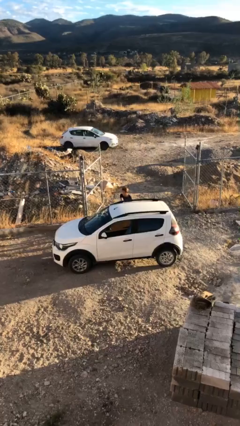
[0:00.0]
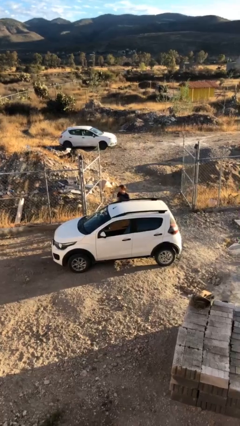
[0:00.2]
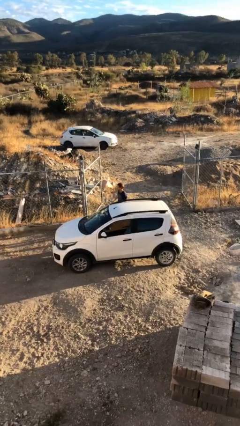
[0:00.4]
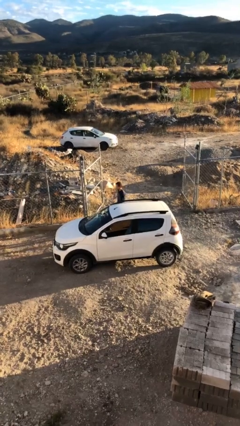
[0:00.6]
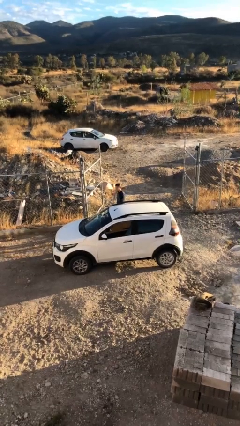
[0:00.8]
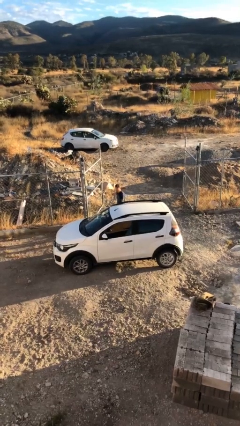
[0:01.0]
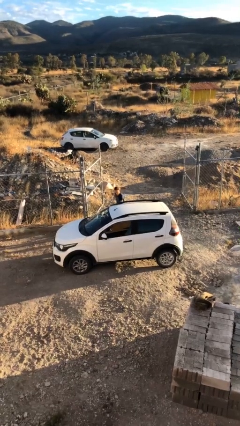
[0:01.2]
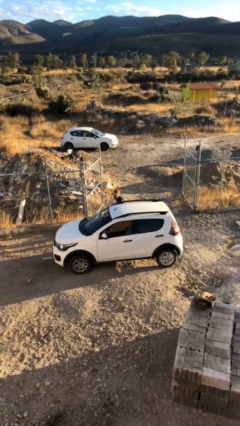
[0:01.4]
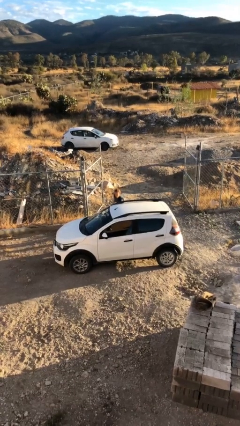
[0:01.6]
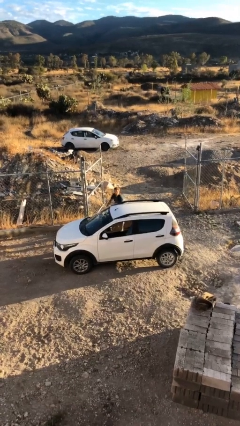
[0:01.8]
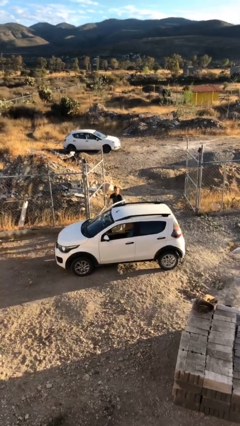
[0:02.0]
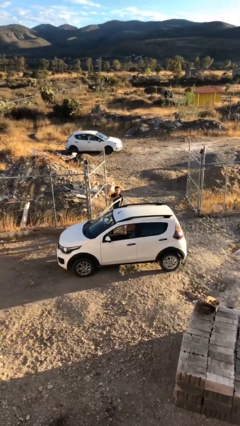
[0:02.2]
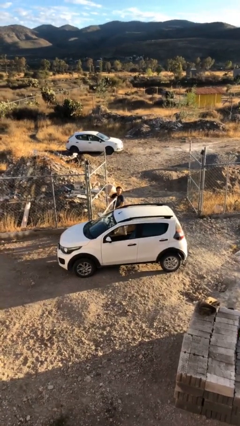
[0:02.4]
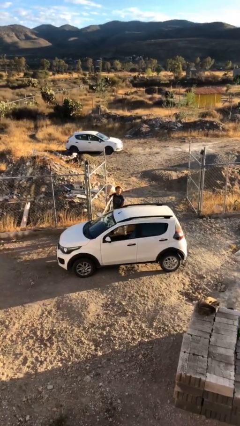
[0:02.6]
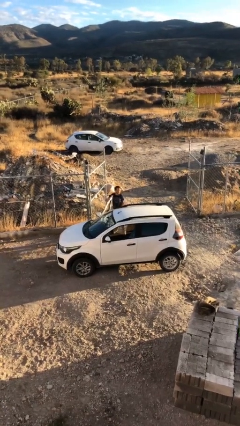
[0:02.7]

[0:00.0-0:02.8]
person opens car door

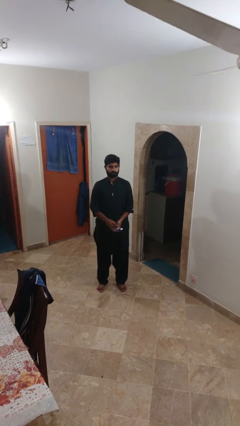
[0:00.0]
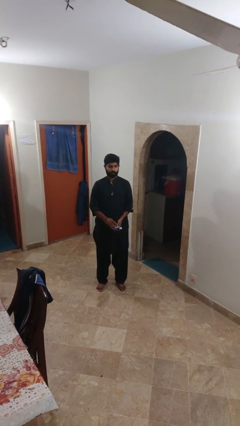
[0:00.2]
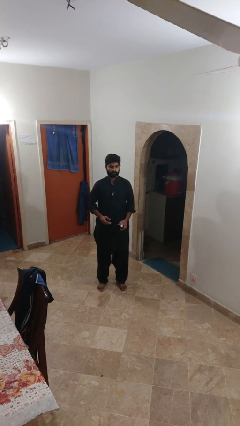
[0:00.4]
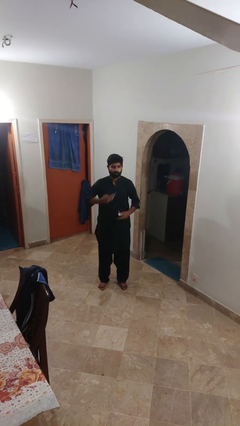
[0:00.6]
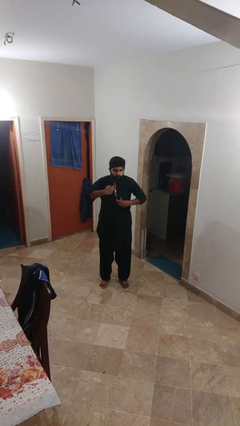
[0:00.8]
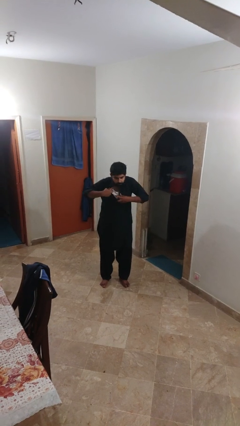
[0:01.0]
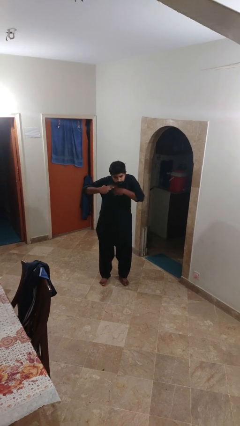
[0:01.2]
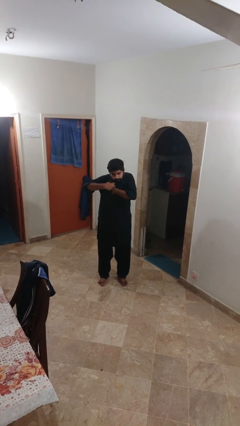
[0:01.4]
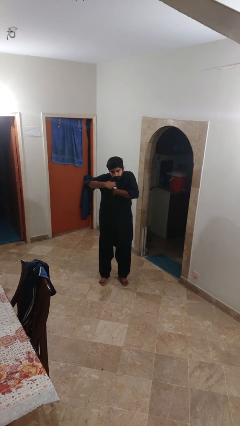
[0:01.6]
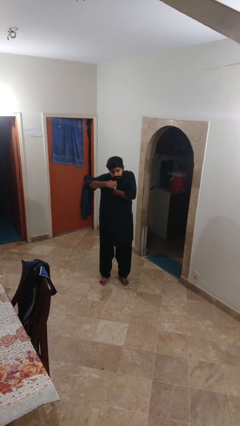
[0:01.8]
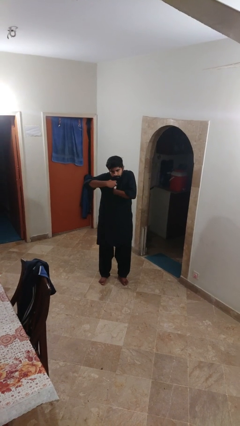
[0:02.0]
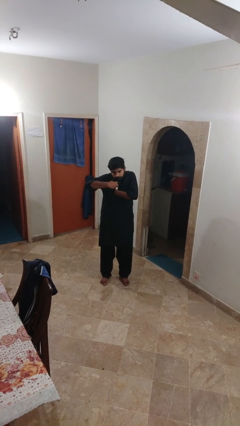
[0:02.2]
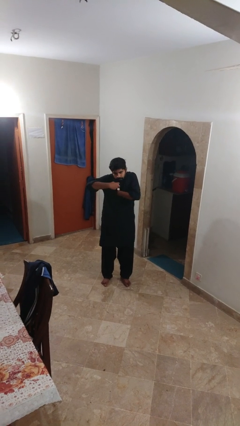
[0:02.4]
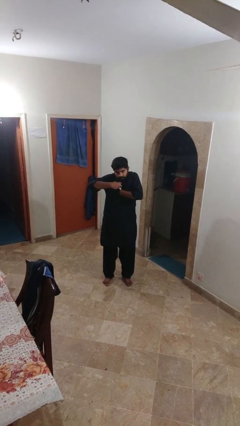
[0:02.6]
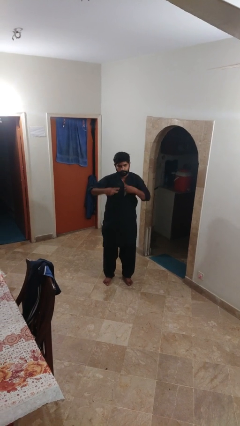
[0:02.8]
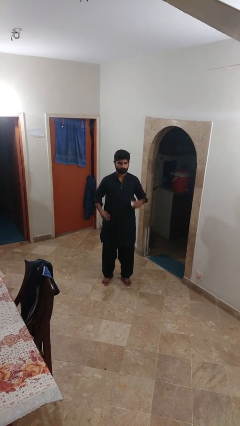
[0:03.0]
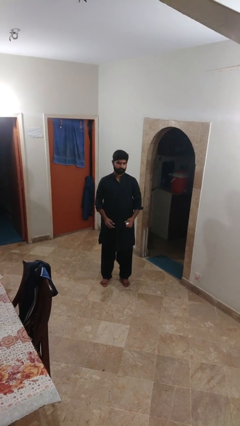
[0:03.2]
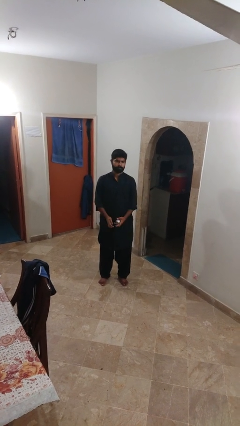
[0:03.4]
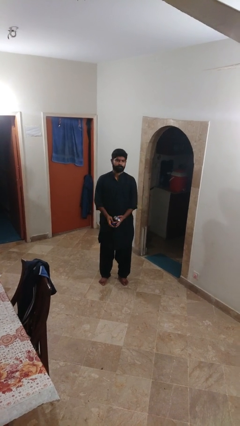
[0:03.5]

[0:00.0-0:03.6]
person applies deodorant

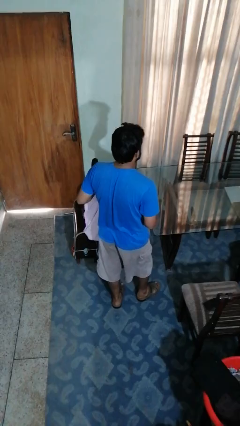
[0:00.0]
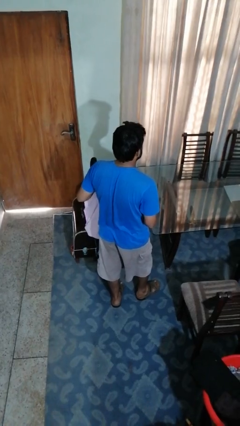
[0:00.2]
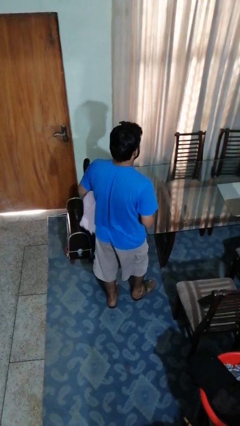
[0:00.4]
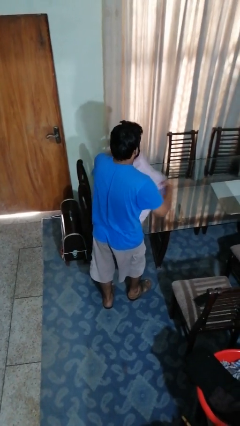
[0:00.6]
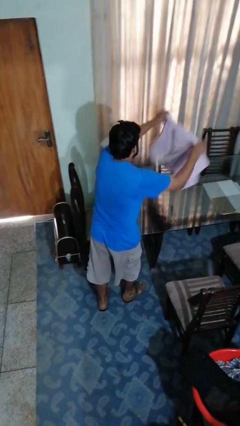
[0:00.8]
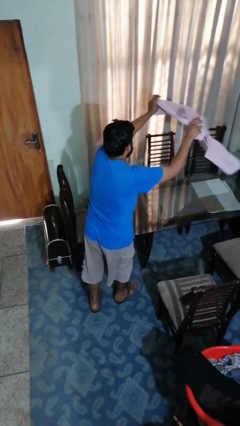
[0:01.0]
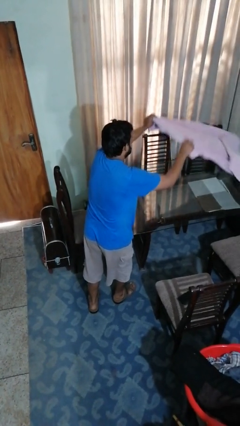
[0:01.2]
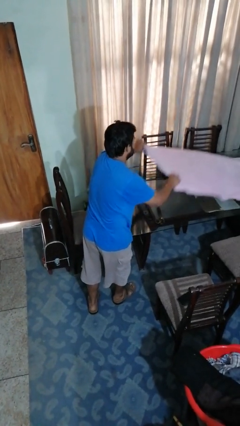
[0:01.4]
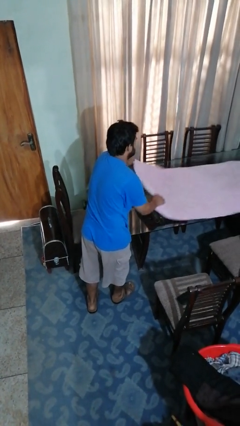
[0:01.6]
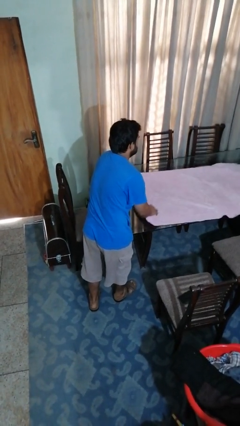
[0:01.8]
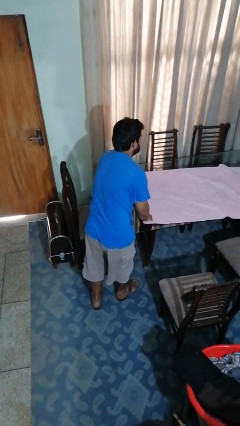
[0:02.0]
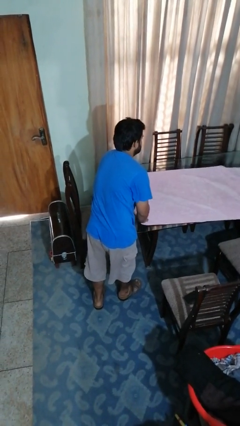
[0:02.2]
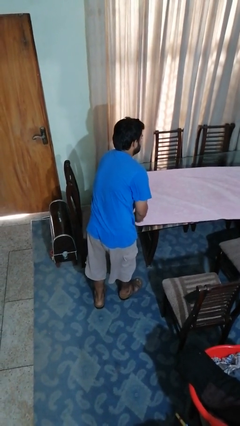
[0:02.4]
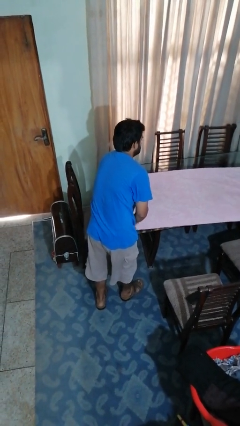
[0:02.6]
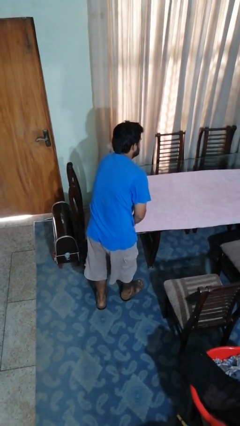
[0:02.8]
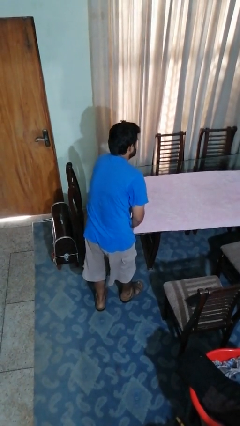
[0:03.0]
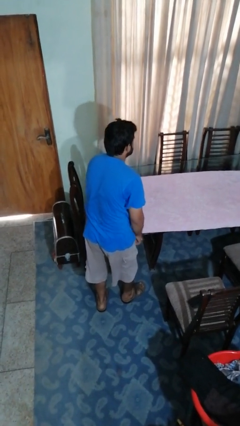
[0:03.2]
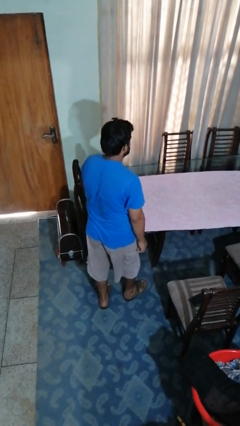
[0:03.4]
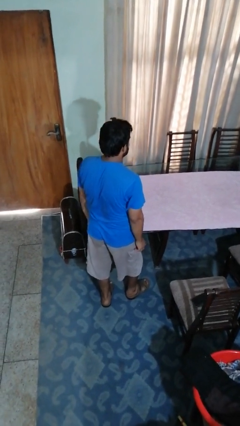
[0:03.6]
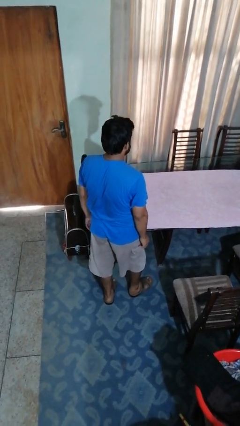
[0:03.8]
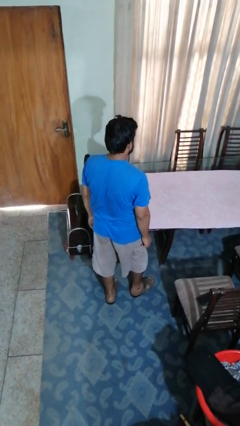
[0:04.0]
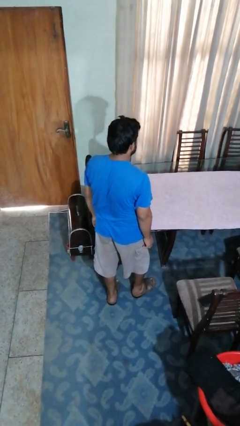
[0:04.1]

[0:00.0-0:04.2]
person spreads tablecloth

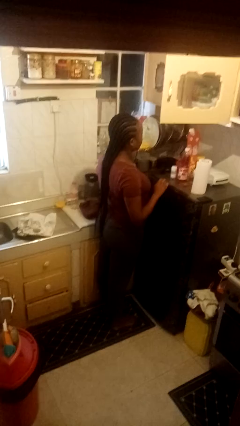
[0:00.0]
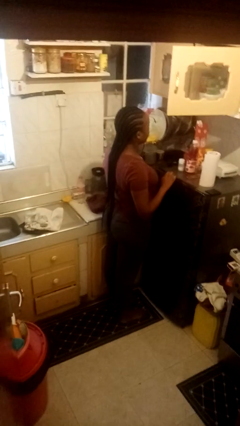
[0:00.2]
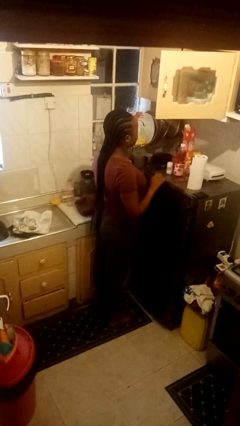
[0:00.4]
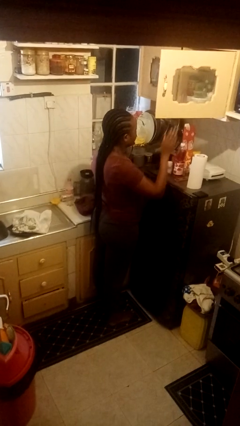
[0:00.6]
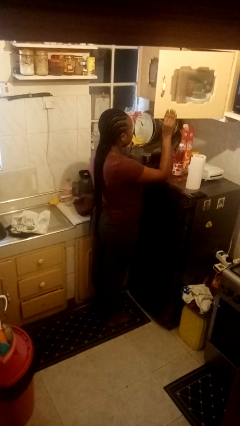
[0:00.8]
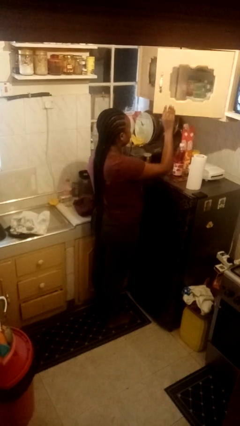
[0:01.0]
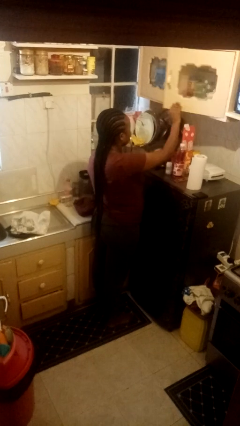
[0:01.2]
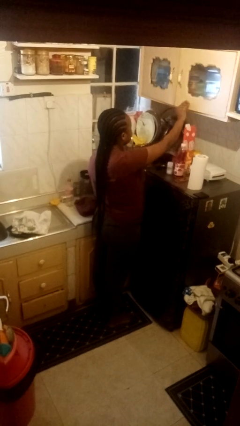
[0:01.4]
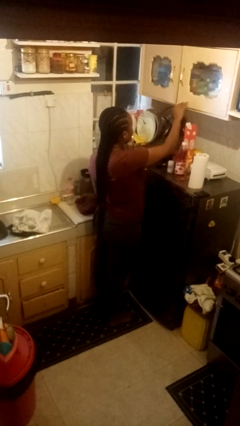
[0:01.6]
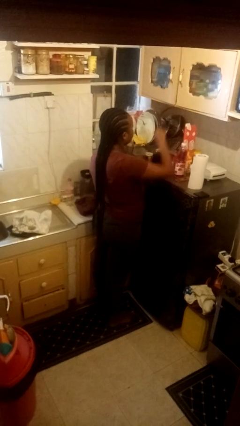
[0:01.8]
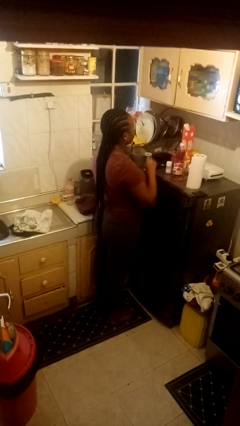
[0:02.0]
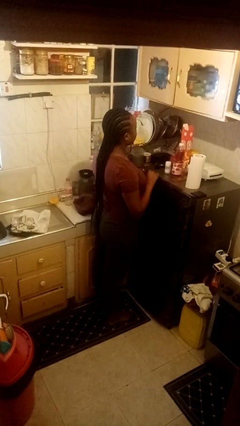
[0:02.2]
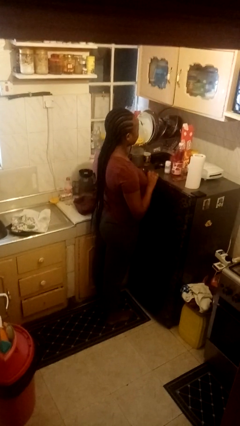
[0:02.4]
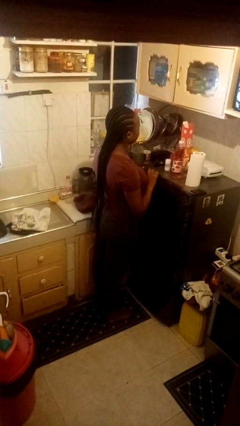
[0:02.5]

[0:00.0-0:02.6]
person closes cabinet

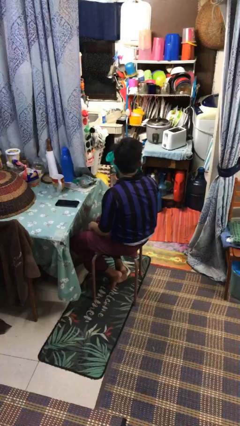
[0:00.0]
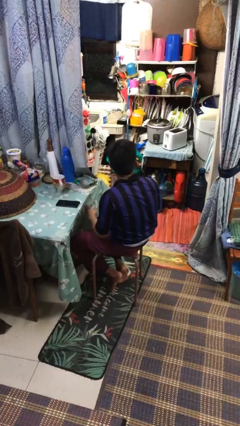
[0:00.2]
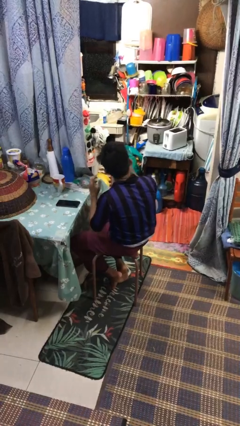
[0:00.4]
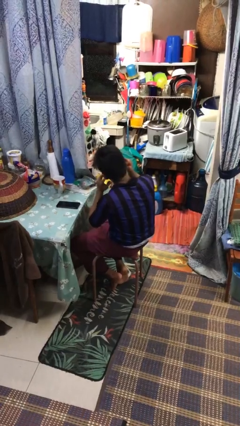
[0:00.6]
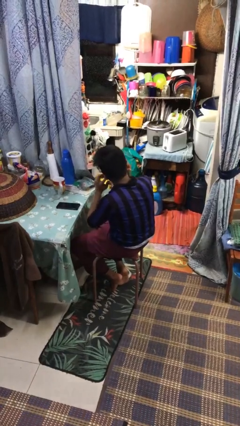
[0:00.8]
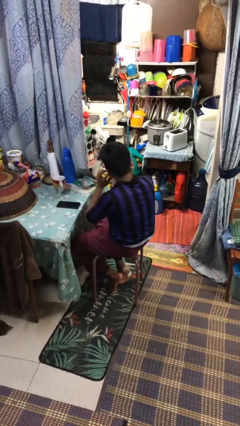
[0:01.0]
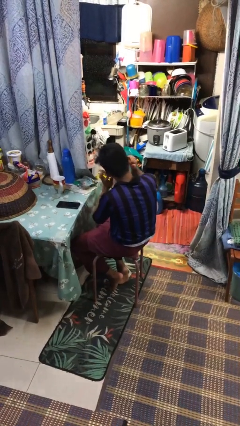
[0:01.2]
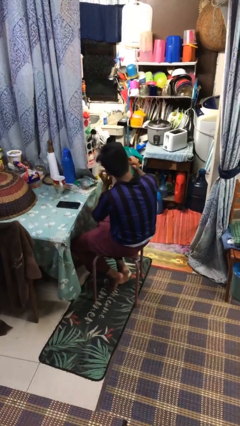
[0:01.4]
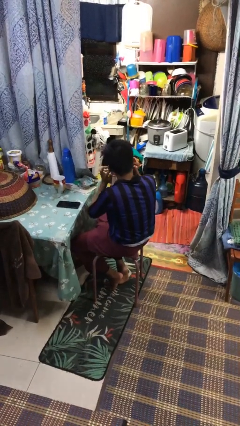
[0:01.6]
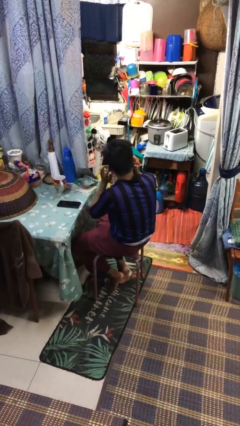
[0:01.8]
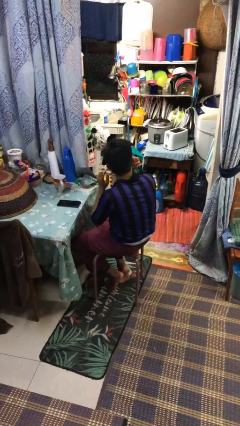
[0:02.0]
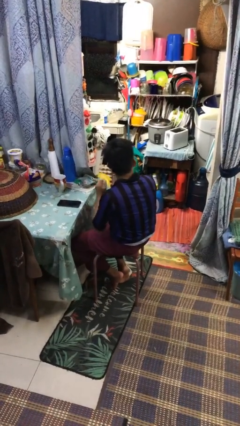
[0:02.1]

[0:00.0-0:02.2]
person puts fingers in ear

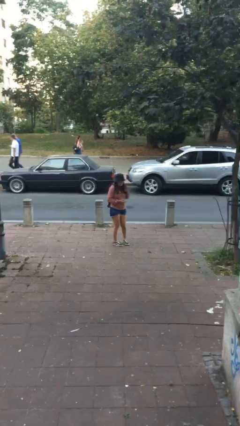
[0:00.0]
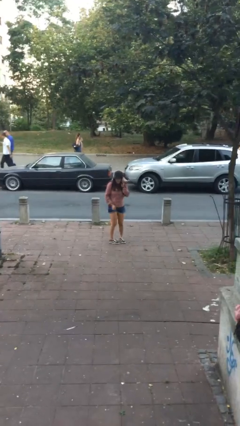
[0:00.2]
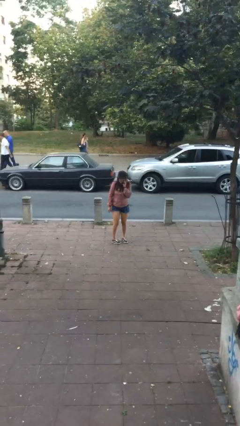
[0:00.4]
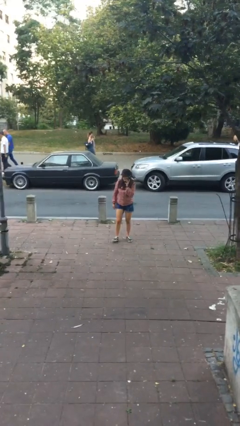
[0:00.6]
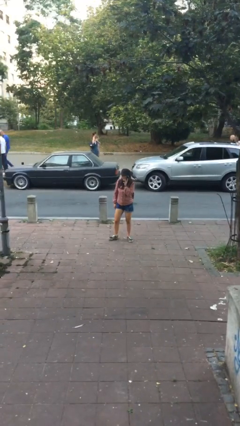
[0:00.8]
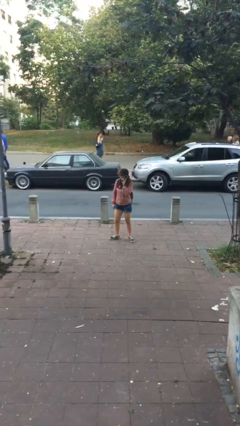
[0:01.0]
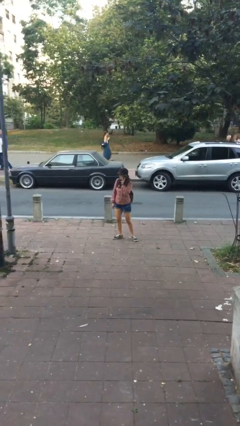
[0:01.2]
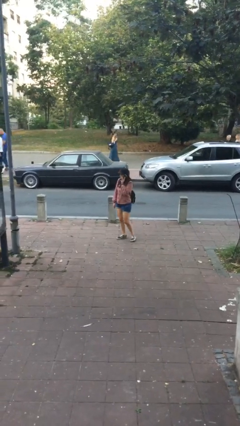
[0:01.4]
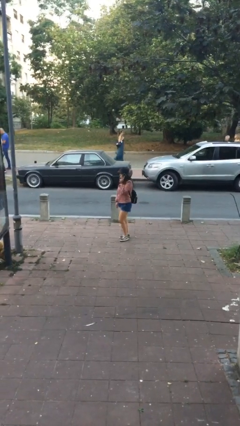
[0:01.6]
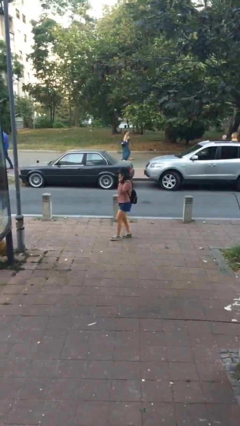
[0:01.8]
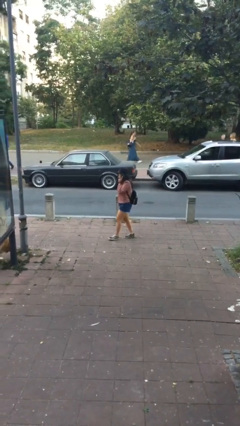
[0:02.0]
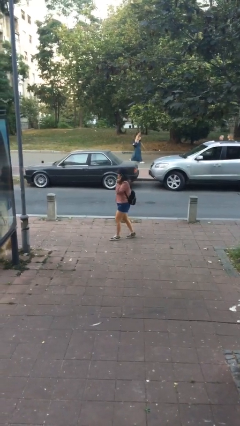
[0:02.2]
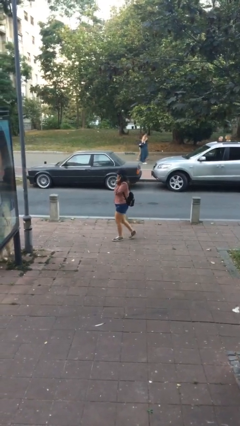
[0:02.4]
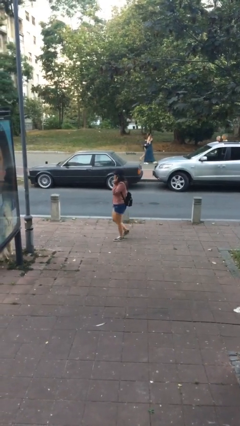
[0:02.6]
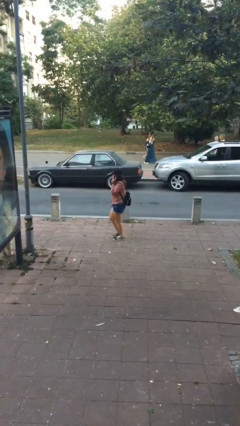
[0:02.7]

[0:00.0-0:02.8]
person talks on phone
